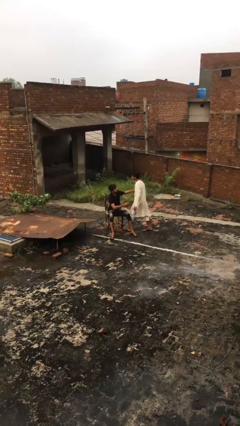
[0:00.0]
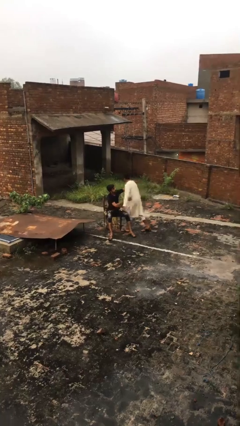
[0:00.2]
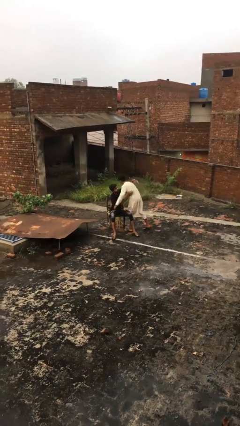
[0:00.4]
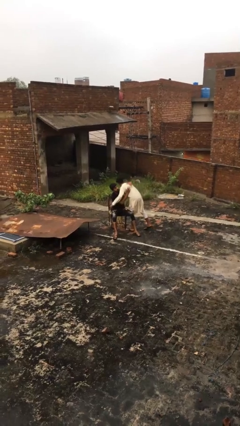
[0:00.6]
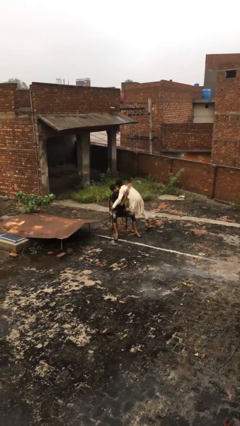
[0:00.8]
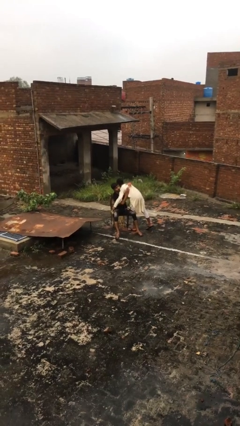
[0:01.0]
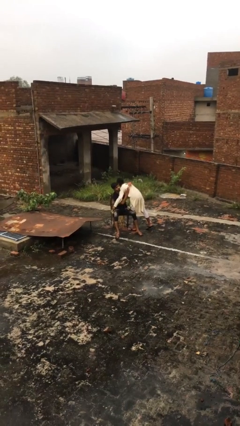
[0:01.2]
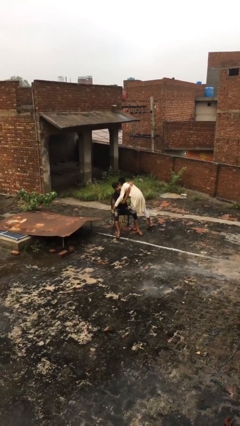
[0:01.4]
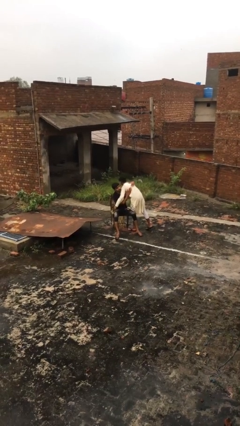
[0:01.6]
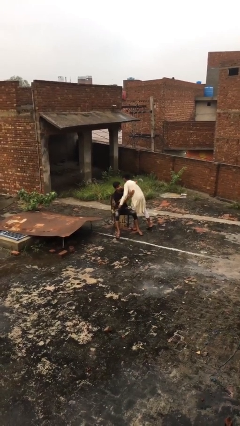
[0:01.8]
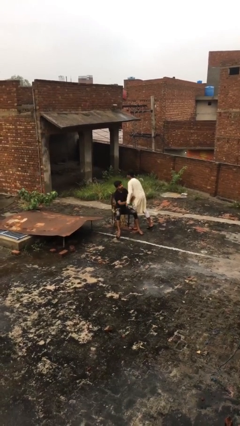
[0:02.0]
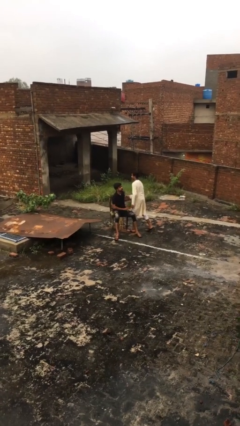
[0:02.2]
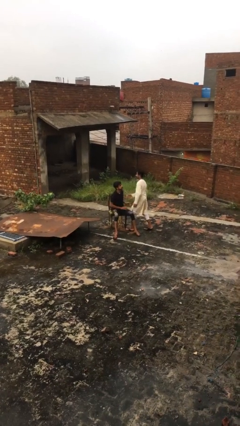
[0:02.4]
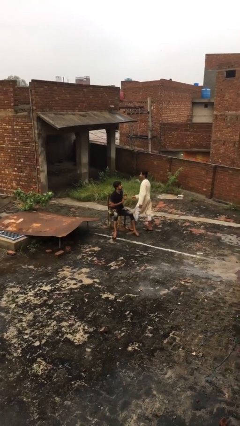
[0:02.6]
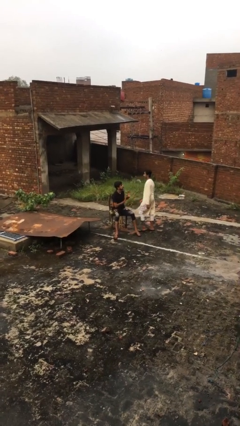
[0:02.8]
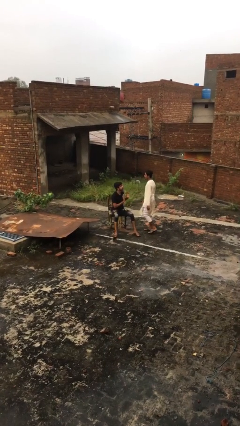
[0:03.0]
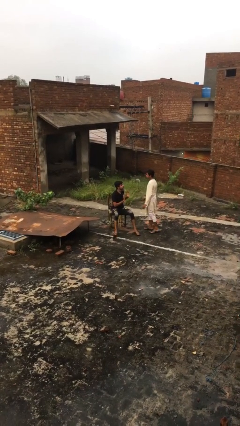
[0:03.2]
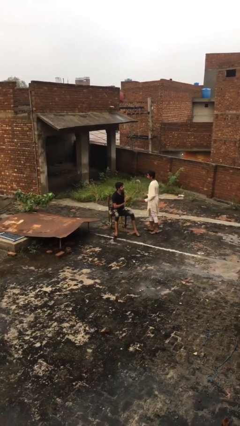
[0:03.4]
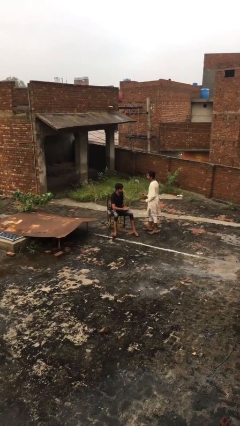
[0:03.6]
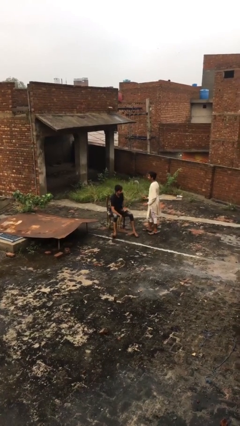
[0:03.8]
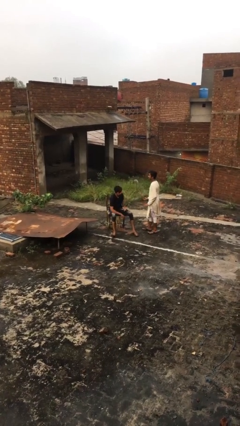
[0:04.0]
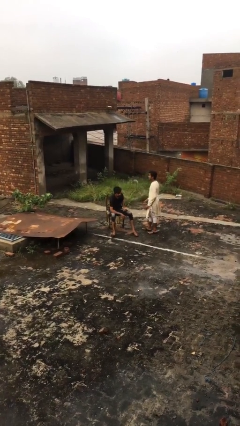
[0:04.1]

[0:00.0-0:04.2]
person embraces person

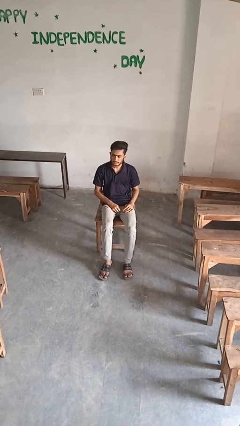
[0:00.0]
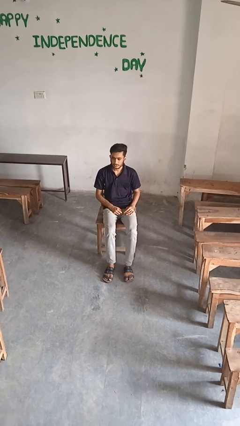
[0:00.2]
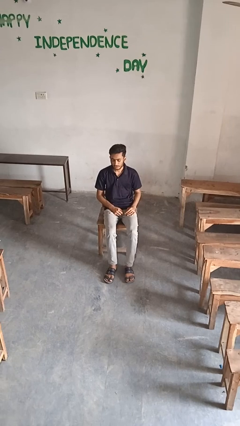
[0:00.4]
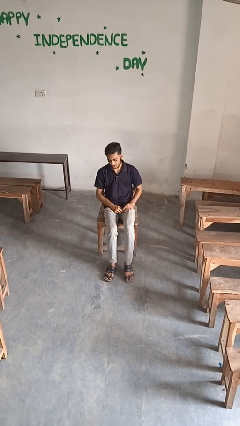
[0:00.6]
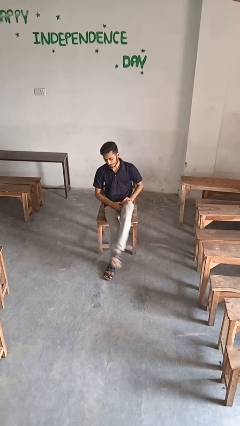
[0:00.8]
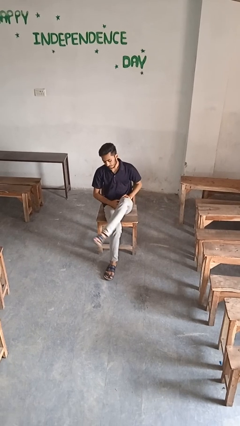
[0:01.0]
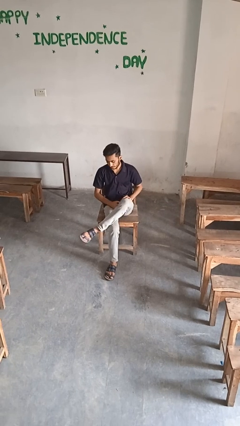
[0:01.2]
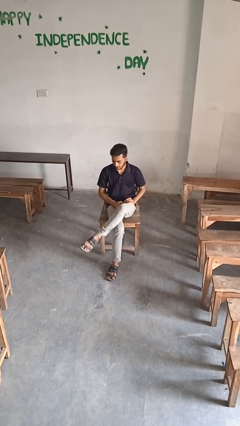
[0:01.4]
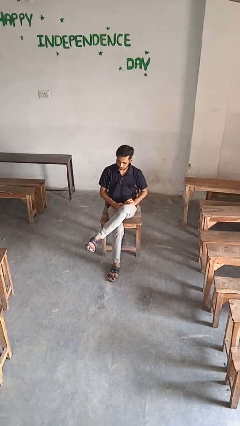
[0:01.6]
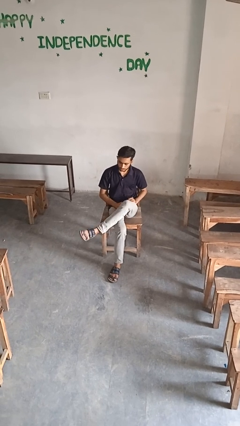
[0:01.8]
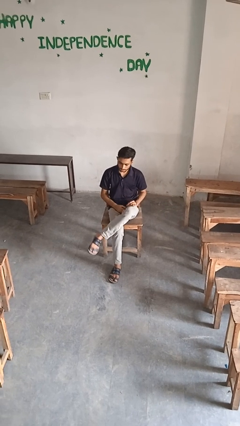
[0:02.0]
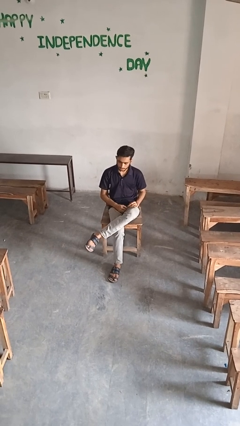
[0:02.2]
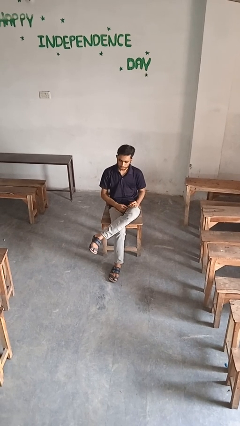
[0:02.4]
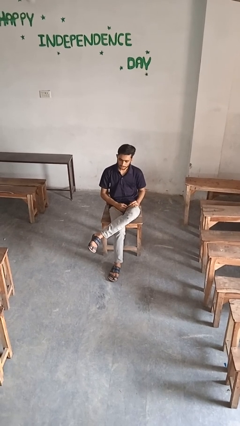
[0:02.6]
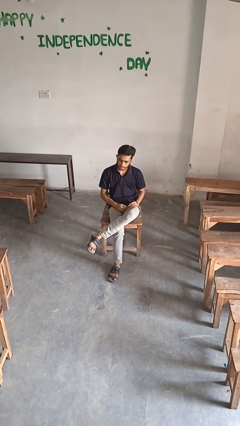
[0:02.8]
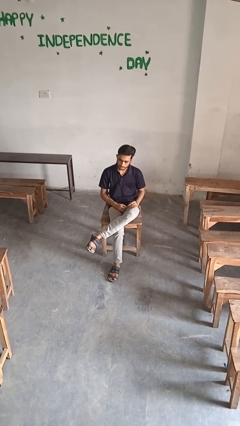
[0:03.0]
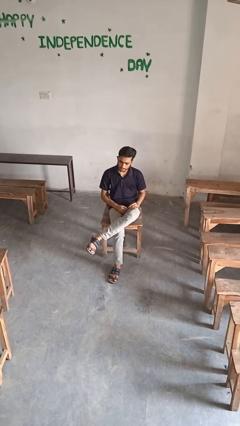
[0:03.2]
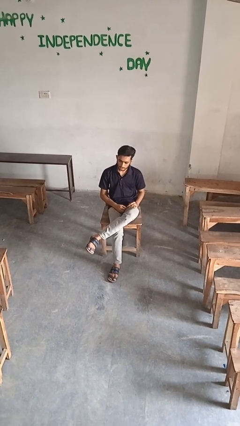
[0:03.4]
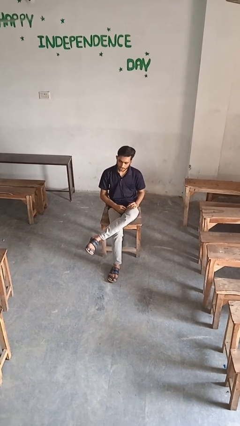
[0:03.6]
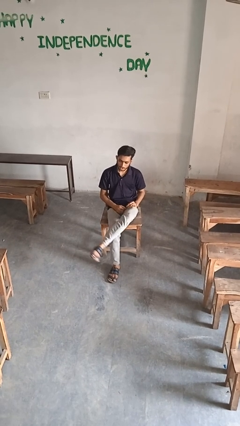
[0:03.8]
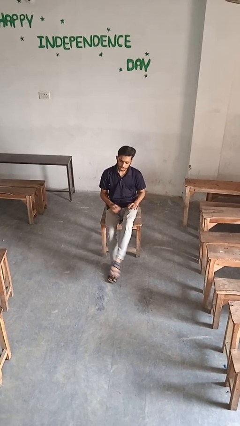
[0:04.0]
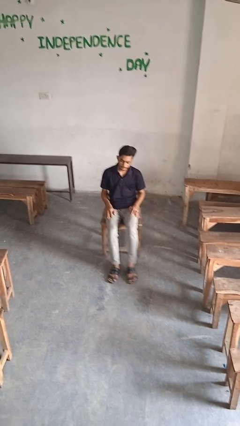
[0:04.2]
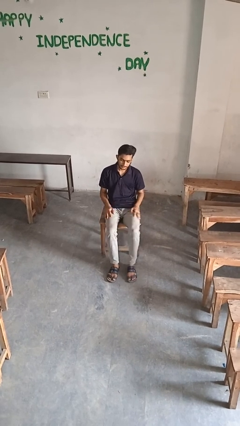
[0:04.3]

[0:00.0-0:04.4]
person crosses legs

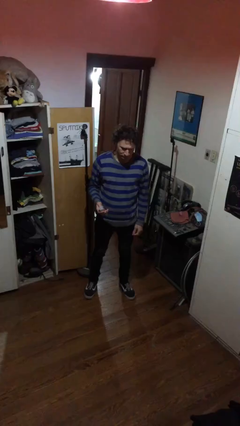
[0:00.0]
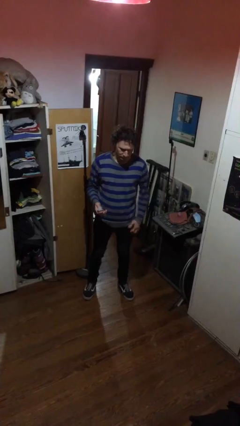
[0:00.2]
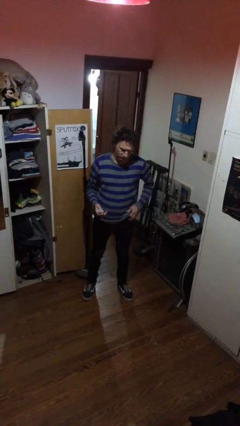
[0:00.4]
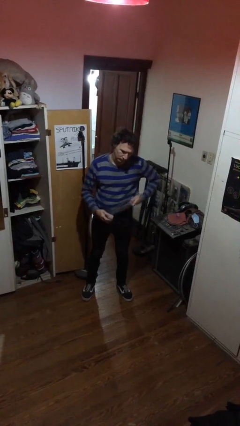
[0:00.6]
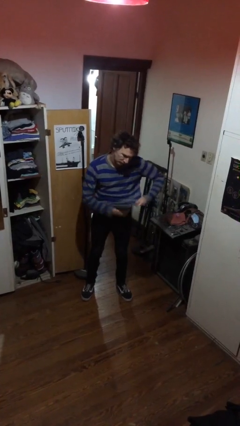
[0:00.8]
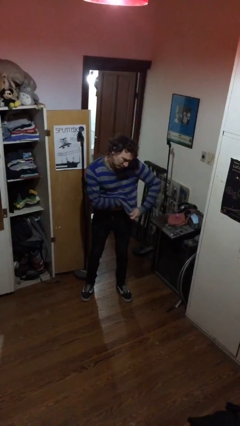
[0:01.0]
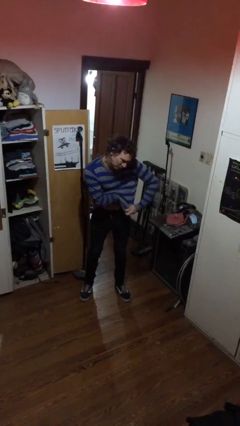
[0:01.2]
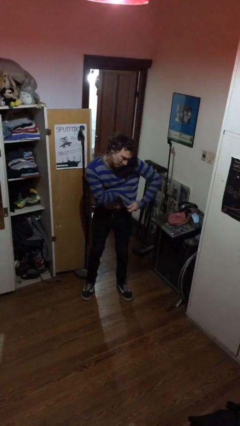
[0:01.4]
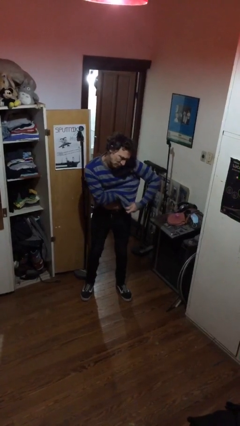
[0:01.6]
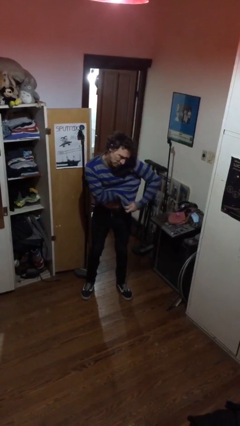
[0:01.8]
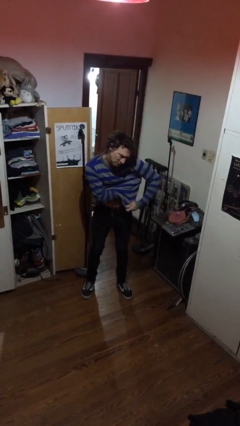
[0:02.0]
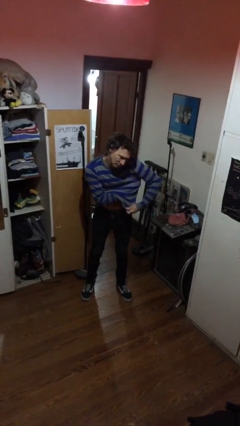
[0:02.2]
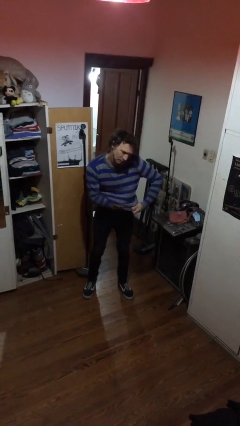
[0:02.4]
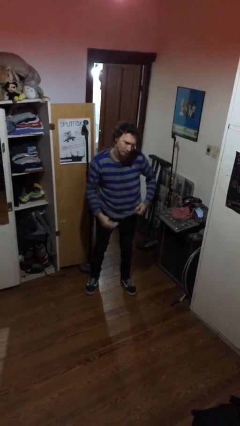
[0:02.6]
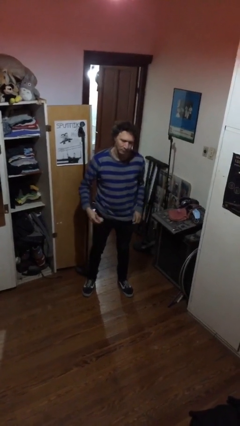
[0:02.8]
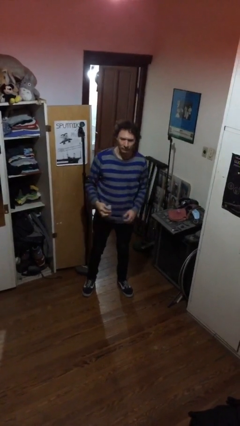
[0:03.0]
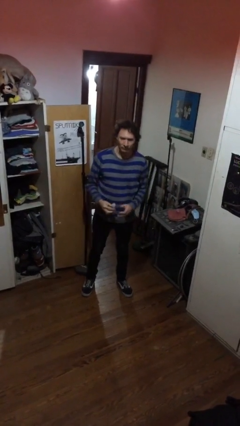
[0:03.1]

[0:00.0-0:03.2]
person applies deodorant

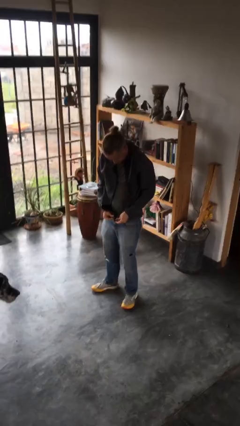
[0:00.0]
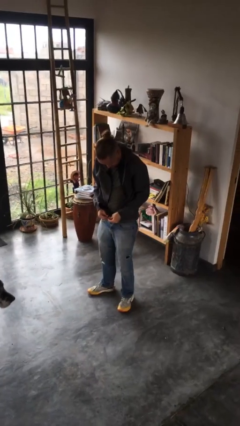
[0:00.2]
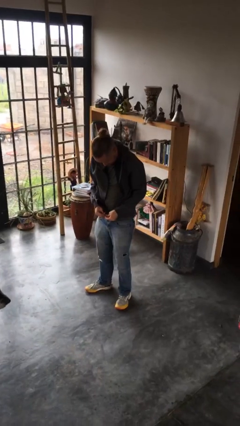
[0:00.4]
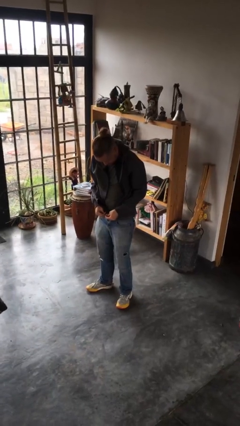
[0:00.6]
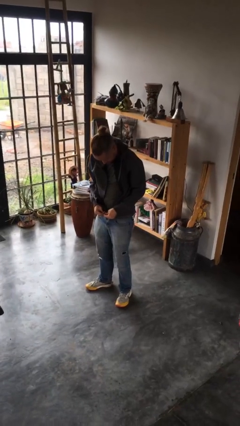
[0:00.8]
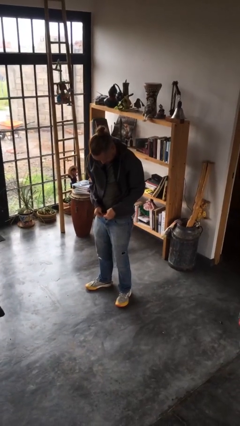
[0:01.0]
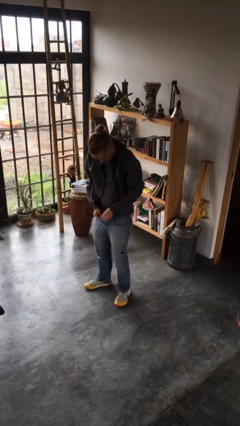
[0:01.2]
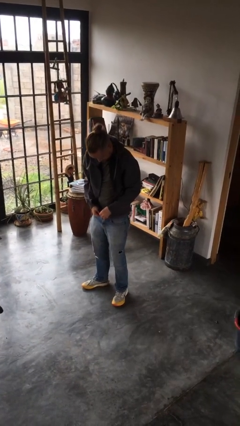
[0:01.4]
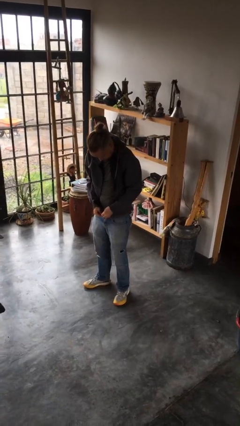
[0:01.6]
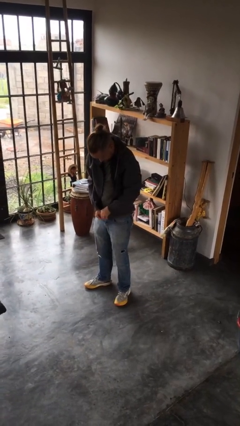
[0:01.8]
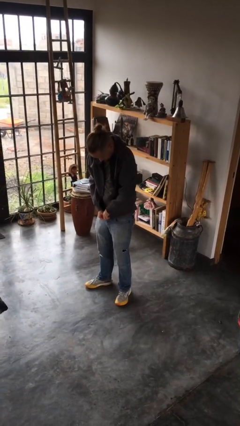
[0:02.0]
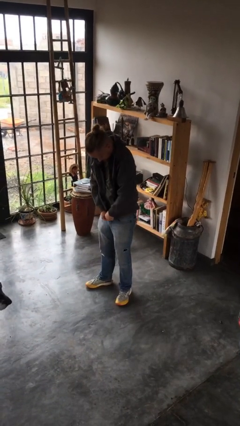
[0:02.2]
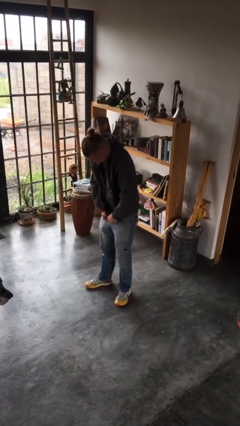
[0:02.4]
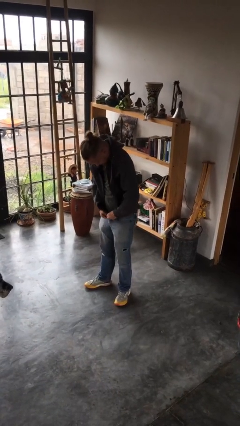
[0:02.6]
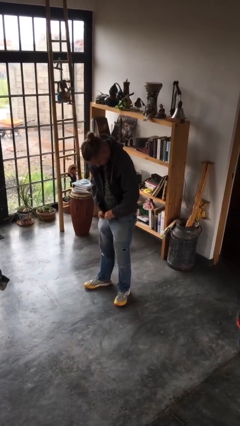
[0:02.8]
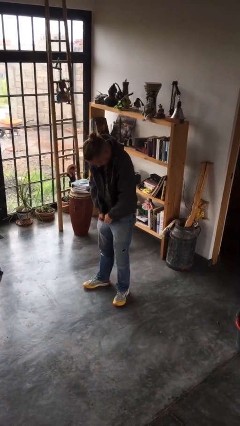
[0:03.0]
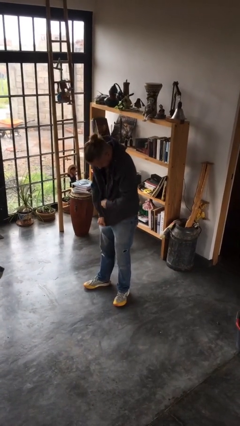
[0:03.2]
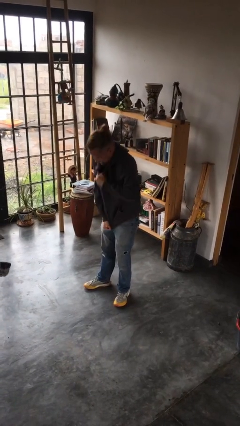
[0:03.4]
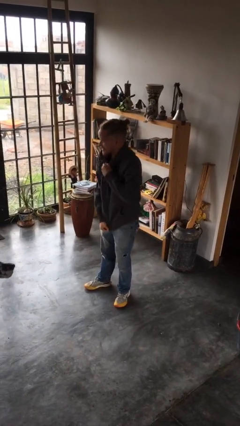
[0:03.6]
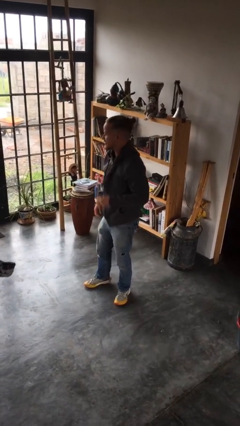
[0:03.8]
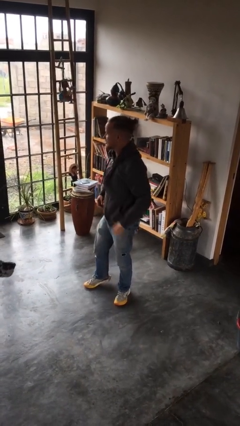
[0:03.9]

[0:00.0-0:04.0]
person zips up jacket

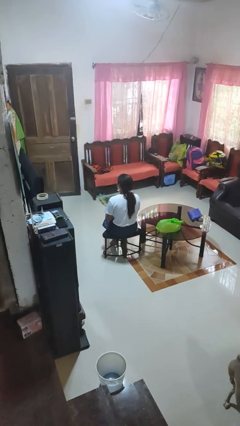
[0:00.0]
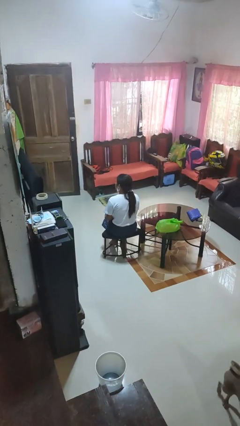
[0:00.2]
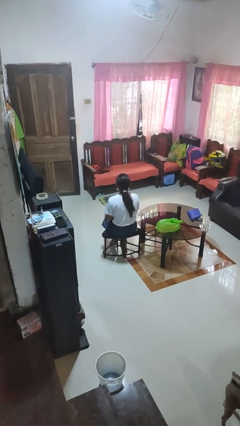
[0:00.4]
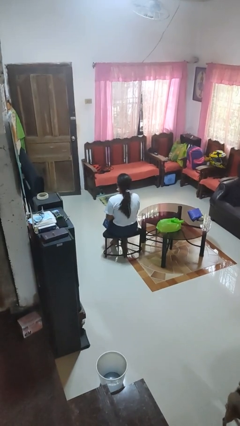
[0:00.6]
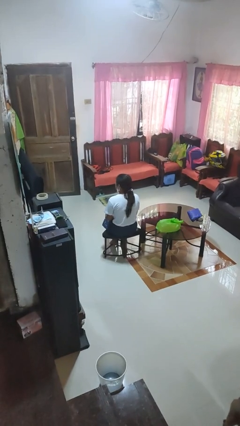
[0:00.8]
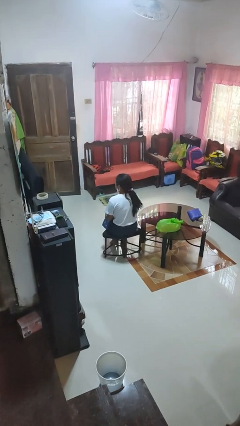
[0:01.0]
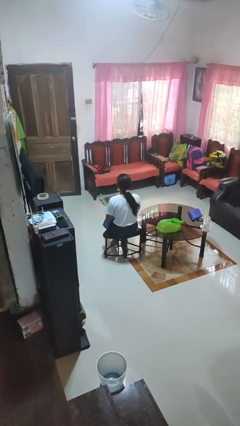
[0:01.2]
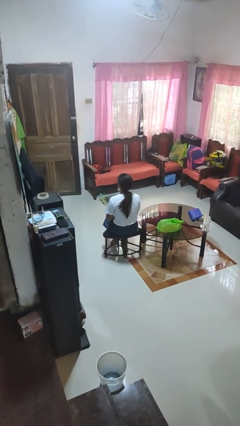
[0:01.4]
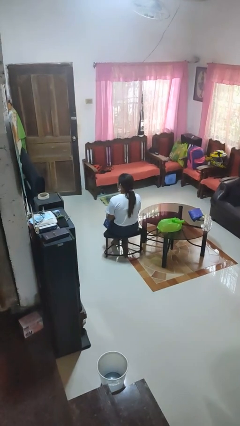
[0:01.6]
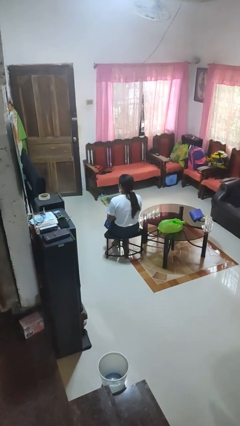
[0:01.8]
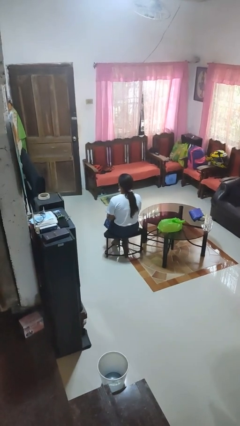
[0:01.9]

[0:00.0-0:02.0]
person shakes head
